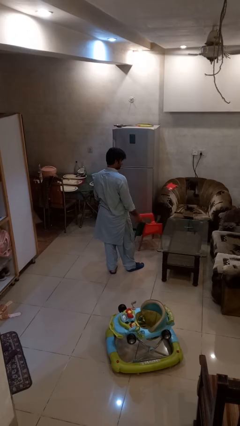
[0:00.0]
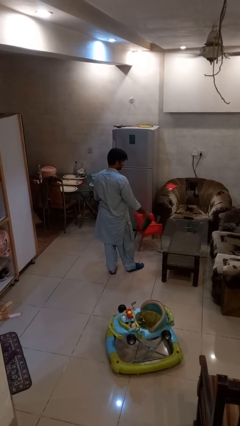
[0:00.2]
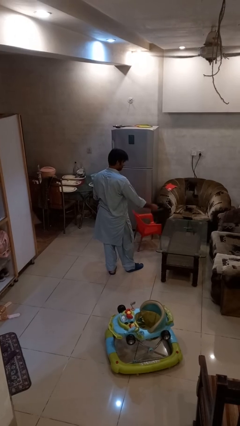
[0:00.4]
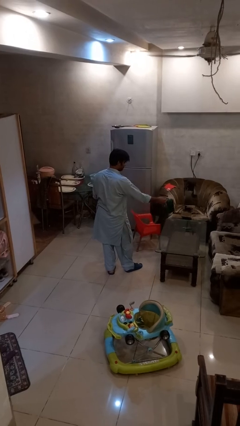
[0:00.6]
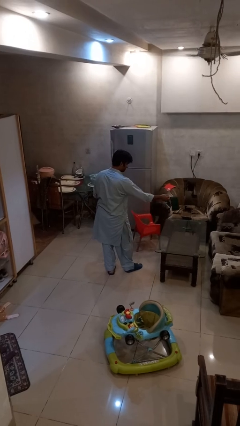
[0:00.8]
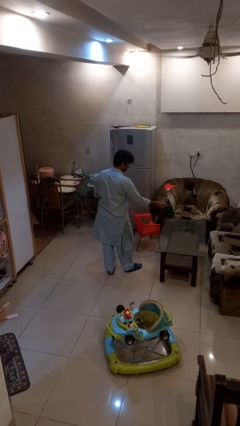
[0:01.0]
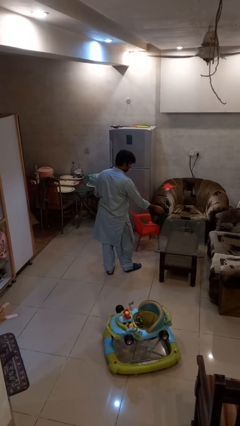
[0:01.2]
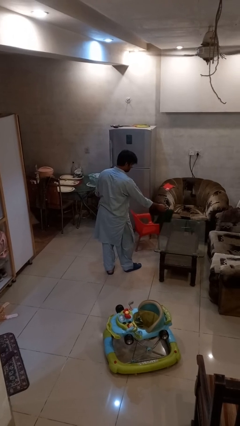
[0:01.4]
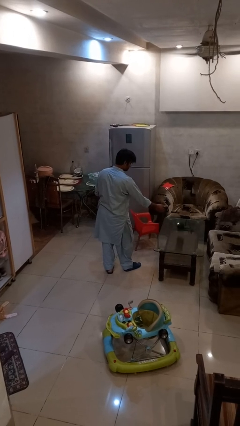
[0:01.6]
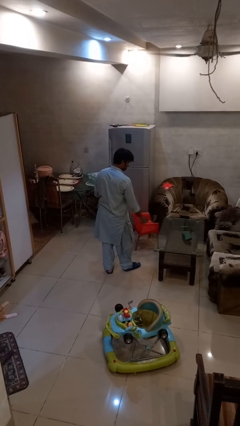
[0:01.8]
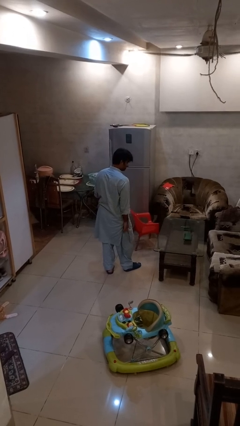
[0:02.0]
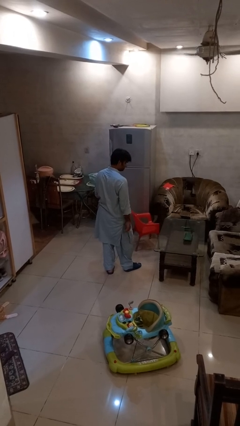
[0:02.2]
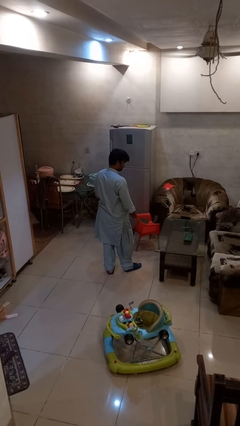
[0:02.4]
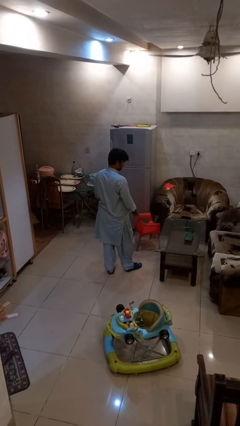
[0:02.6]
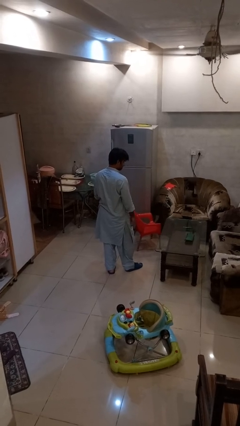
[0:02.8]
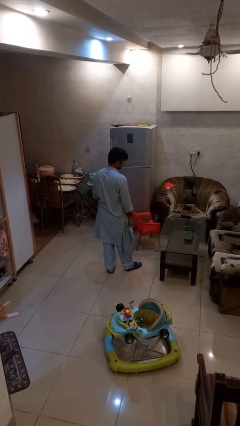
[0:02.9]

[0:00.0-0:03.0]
person throws object on table

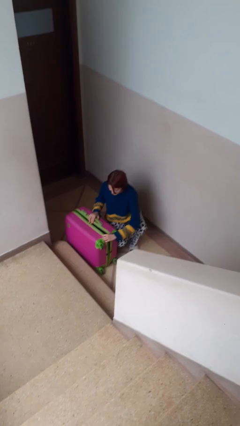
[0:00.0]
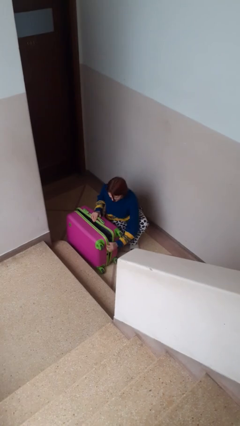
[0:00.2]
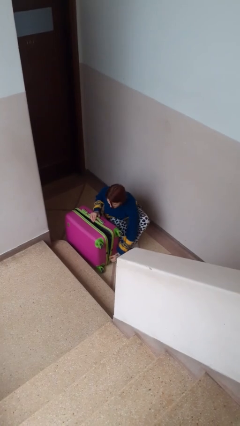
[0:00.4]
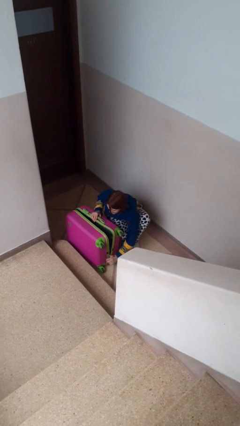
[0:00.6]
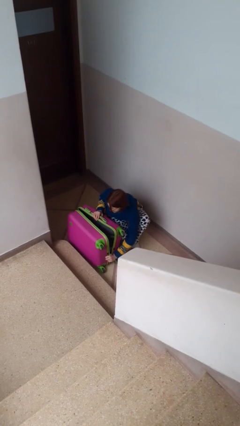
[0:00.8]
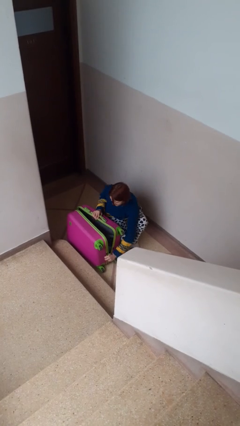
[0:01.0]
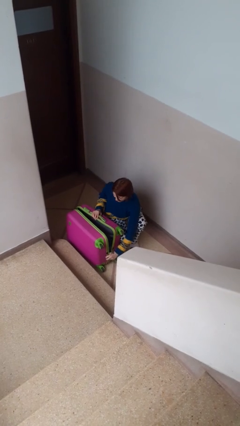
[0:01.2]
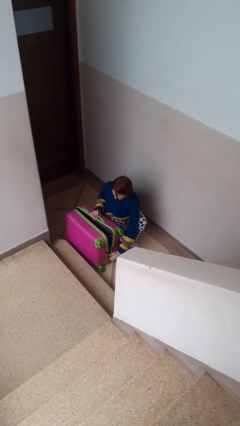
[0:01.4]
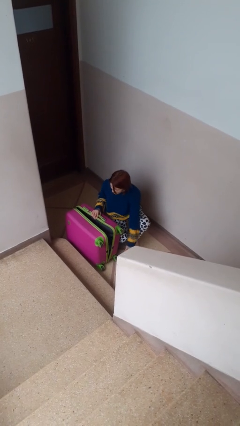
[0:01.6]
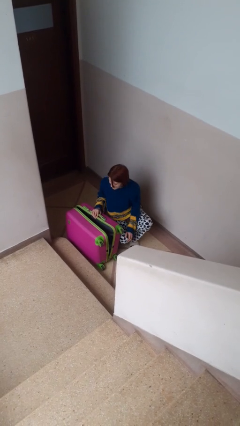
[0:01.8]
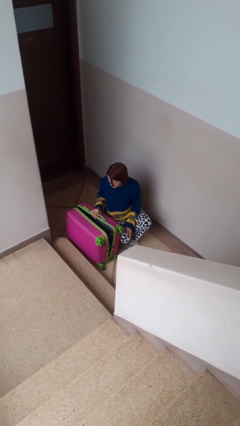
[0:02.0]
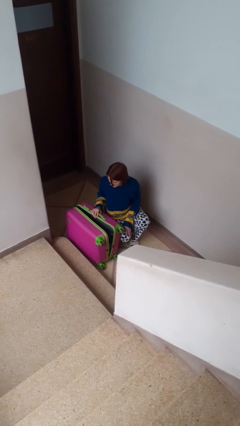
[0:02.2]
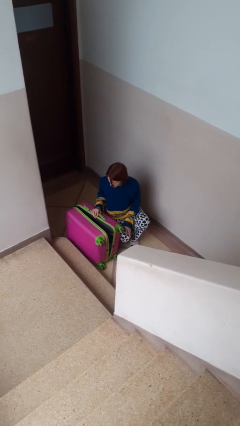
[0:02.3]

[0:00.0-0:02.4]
person opens suitcase

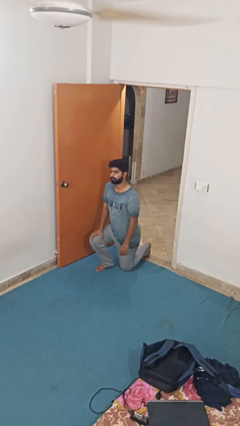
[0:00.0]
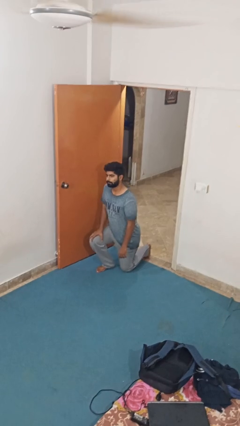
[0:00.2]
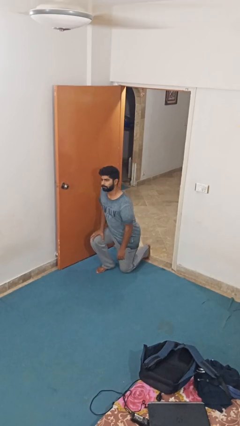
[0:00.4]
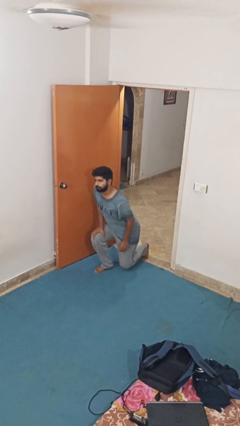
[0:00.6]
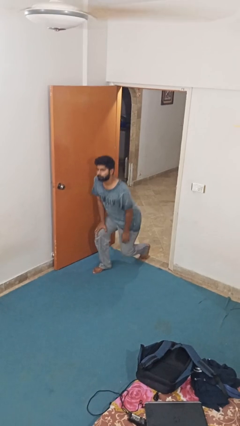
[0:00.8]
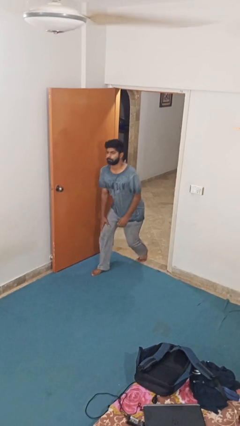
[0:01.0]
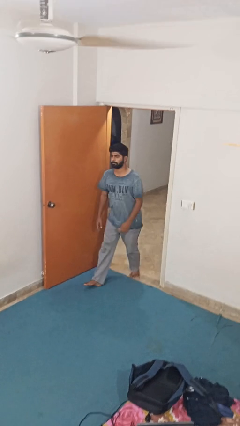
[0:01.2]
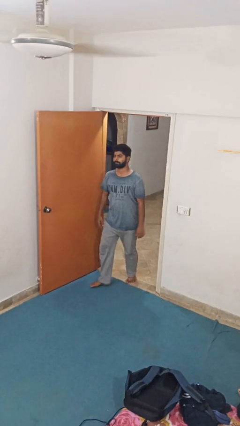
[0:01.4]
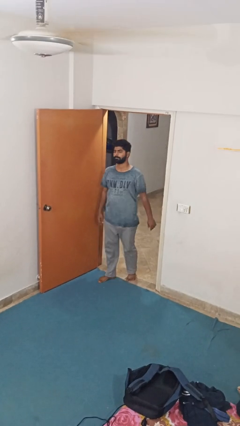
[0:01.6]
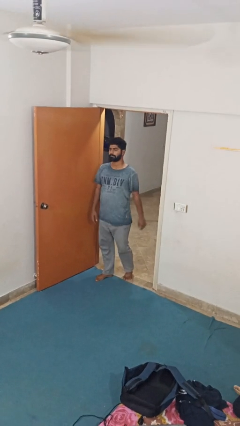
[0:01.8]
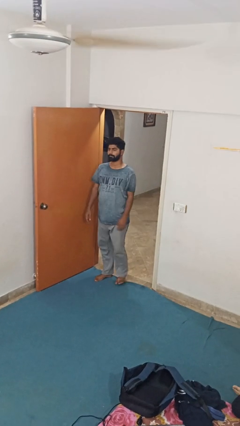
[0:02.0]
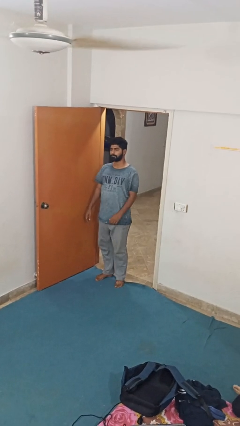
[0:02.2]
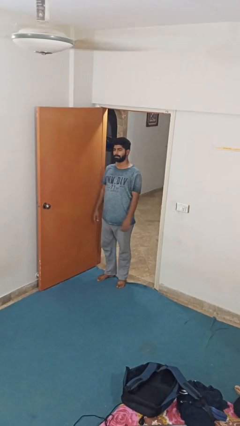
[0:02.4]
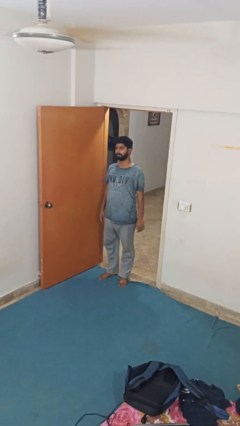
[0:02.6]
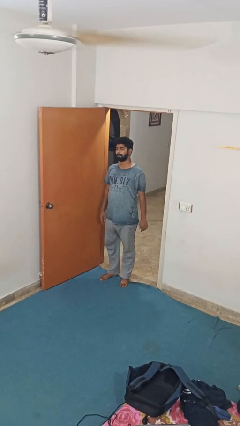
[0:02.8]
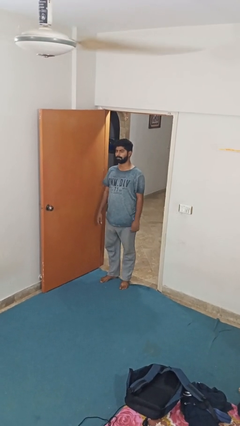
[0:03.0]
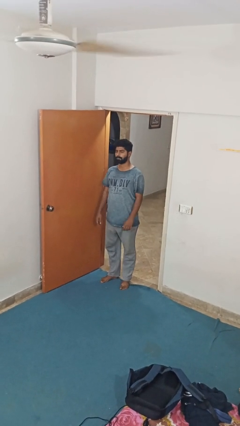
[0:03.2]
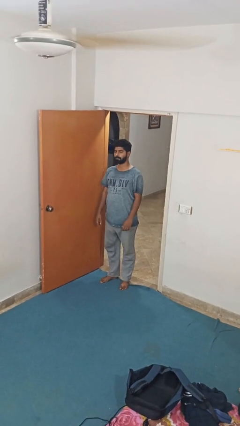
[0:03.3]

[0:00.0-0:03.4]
person stands up from floor

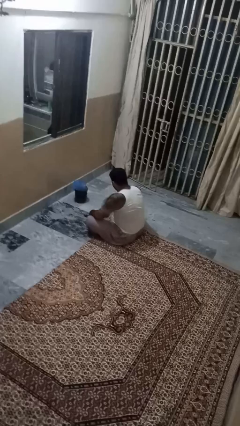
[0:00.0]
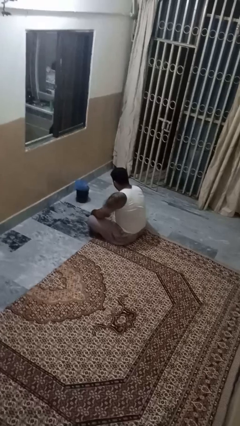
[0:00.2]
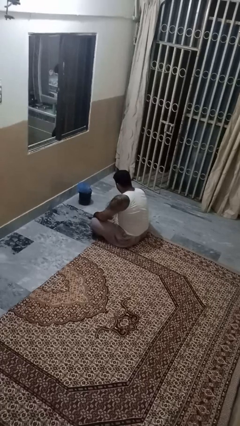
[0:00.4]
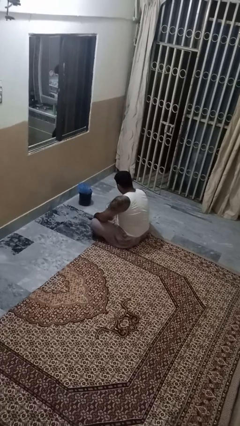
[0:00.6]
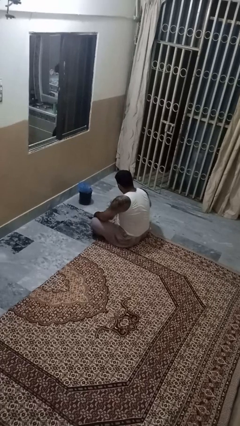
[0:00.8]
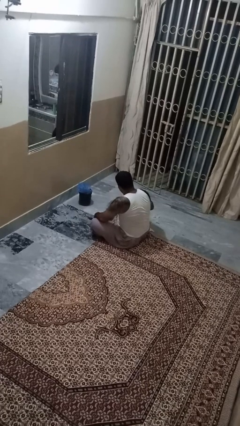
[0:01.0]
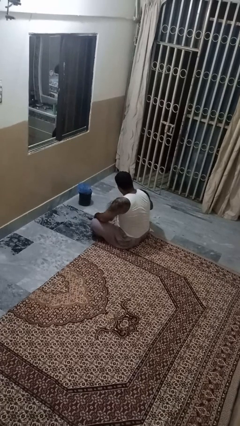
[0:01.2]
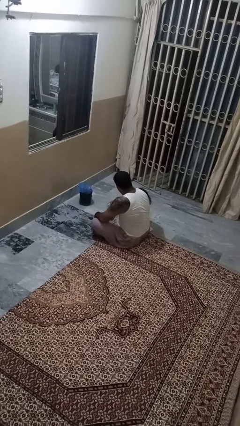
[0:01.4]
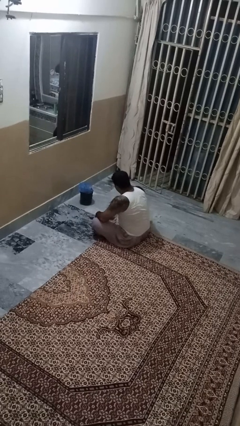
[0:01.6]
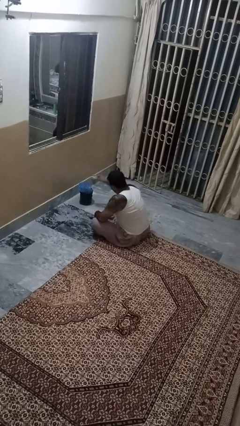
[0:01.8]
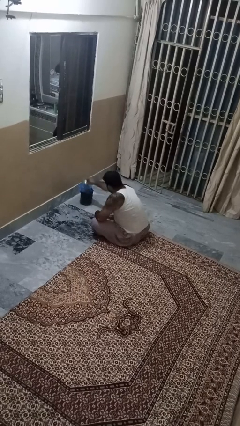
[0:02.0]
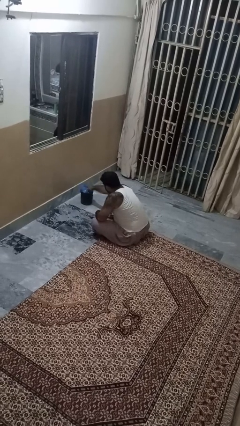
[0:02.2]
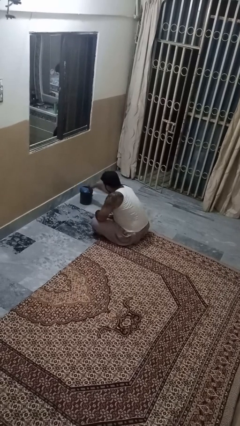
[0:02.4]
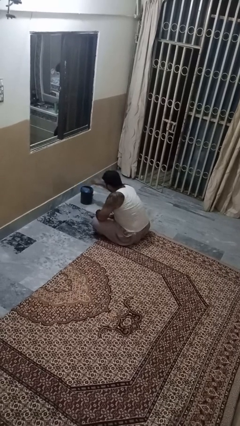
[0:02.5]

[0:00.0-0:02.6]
person discards trash

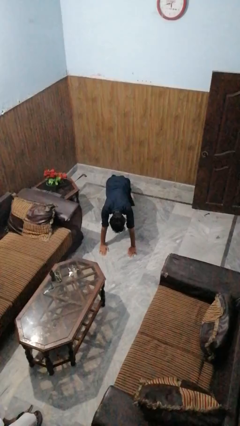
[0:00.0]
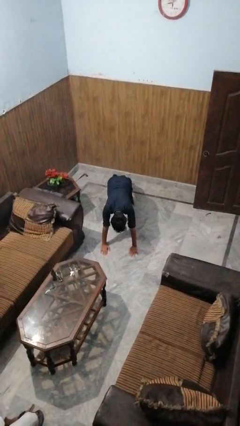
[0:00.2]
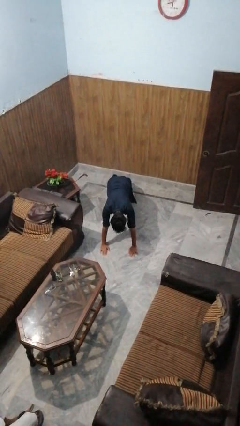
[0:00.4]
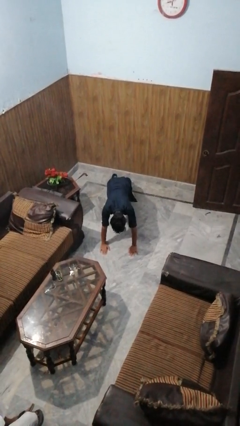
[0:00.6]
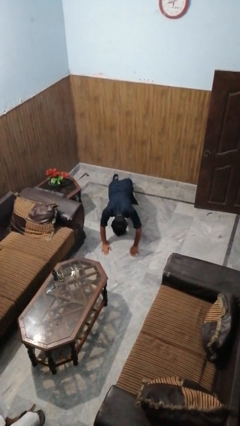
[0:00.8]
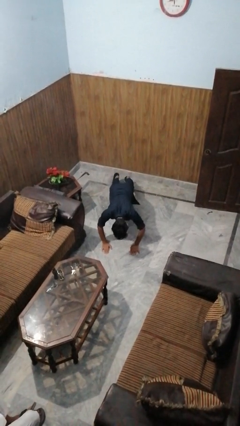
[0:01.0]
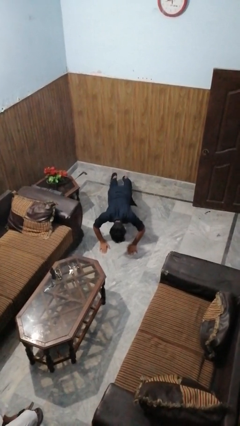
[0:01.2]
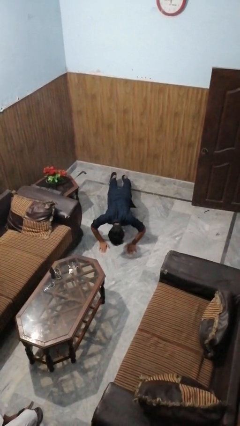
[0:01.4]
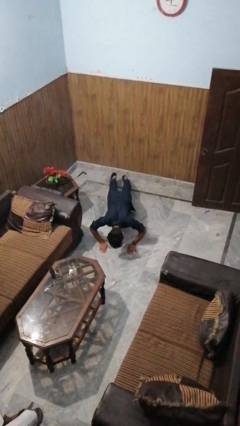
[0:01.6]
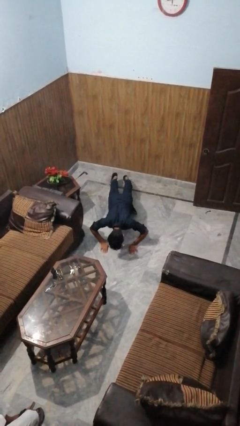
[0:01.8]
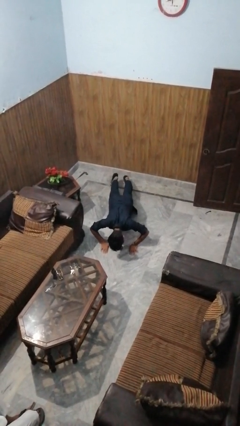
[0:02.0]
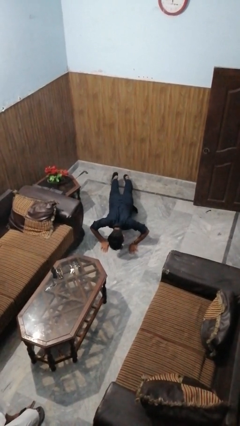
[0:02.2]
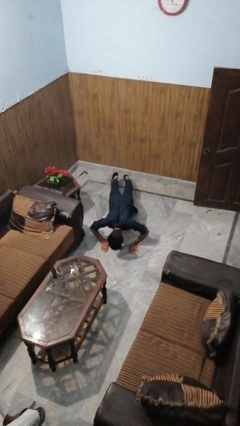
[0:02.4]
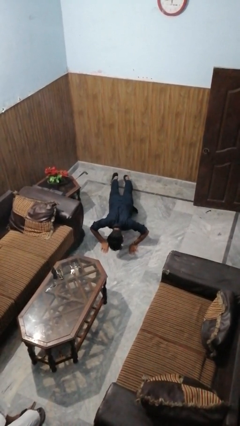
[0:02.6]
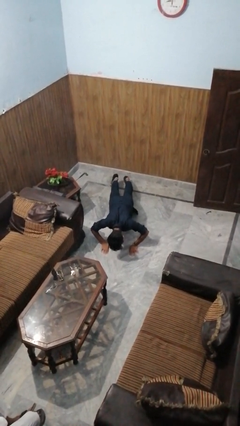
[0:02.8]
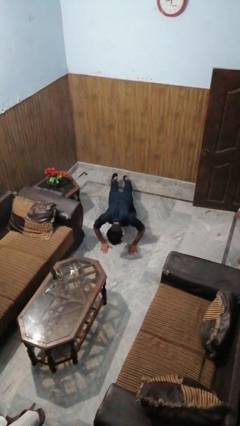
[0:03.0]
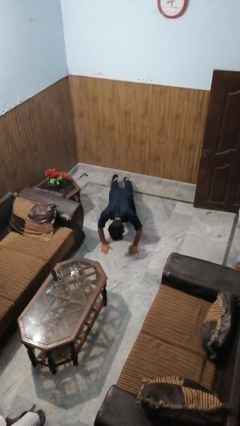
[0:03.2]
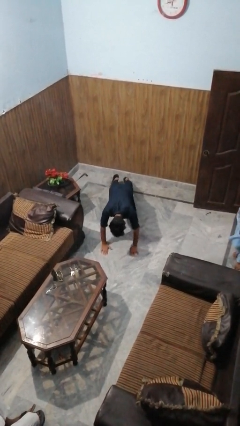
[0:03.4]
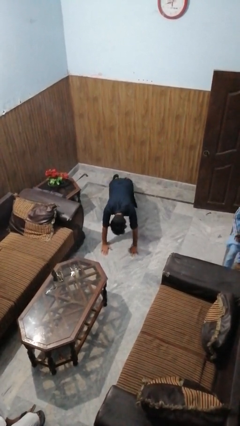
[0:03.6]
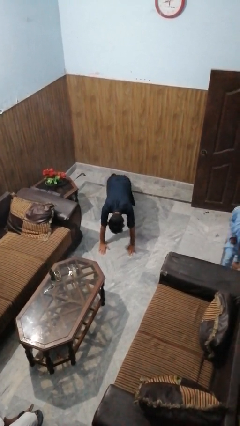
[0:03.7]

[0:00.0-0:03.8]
person exercises with pushup

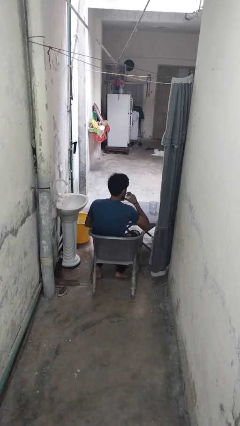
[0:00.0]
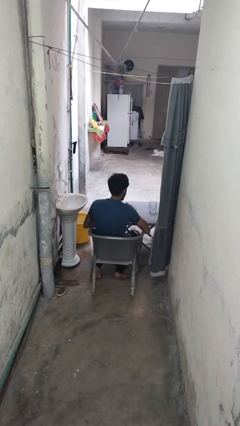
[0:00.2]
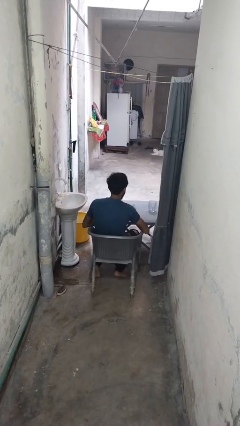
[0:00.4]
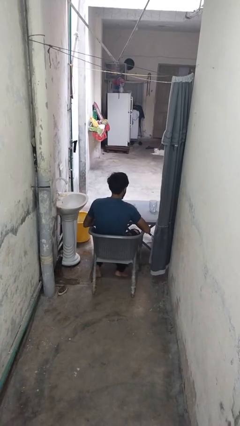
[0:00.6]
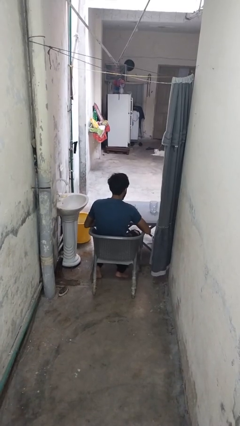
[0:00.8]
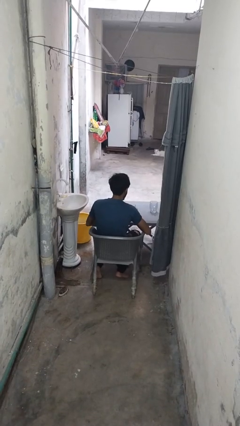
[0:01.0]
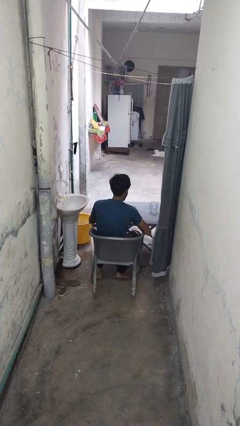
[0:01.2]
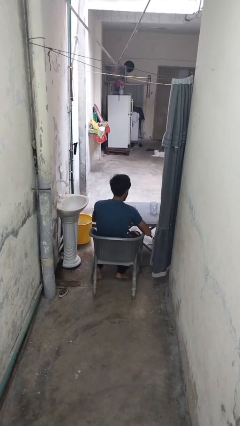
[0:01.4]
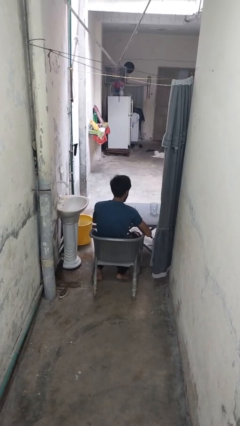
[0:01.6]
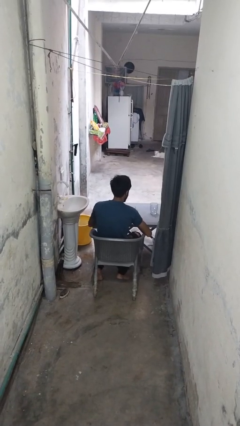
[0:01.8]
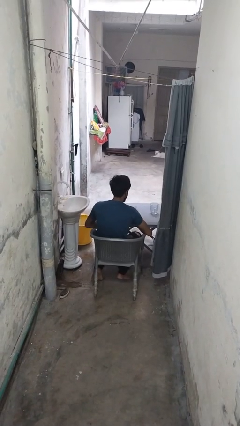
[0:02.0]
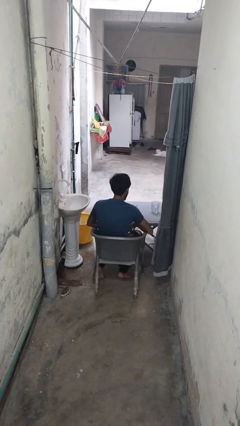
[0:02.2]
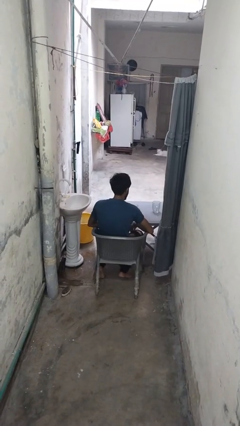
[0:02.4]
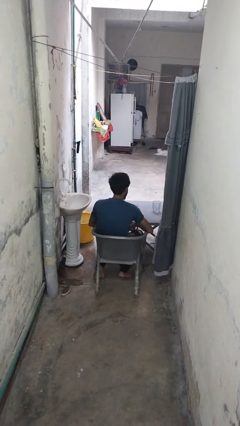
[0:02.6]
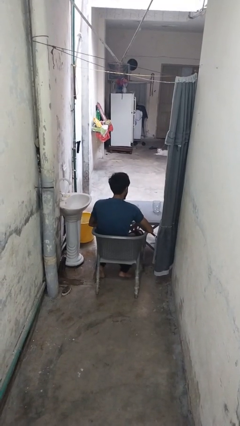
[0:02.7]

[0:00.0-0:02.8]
person puts down object on table
